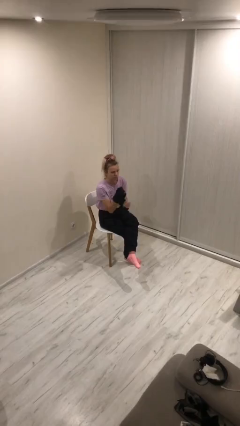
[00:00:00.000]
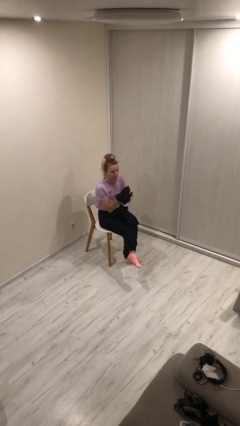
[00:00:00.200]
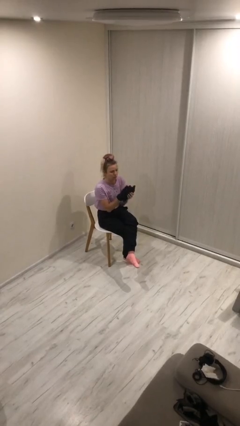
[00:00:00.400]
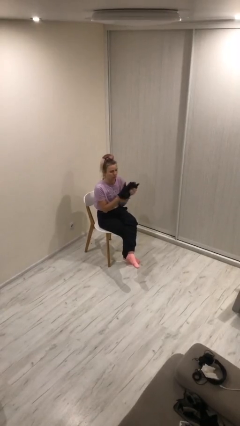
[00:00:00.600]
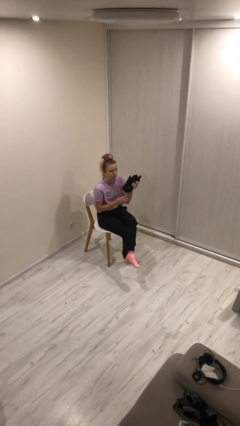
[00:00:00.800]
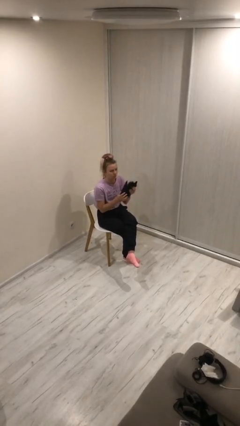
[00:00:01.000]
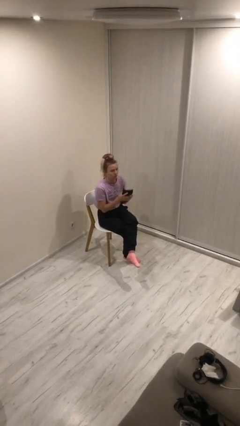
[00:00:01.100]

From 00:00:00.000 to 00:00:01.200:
person takes off gloves

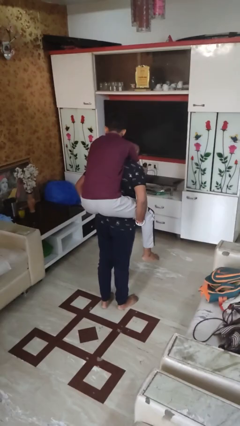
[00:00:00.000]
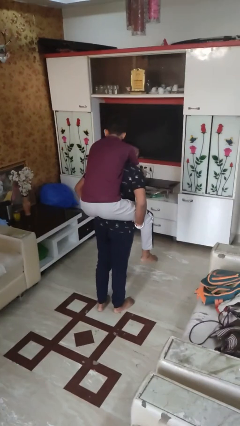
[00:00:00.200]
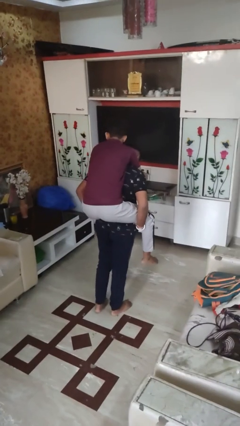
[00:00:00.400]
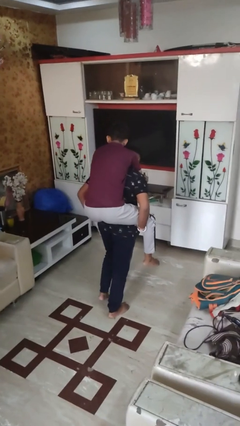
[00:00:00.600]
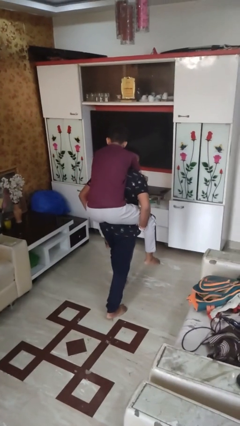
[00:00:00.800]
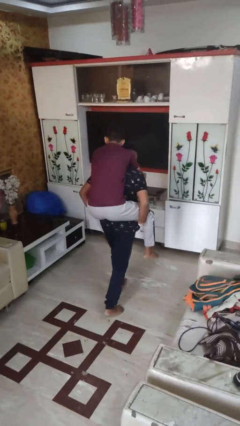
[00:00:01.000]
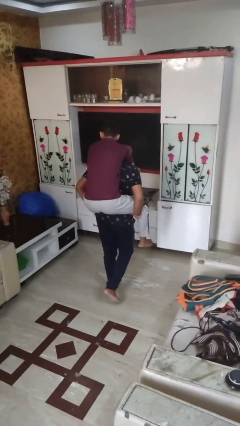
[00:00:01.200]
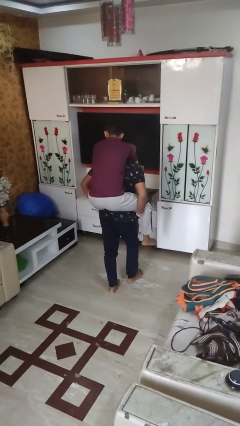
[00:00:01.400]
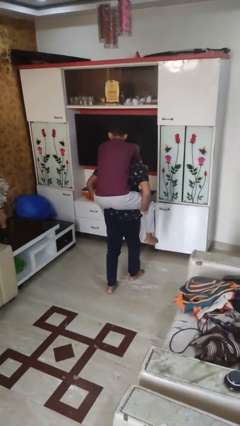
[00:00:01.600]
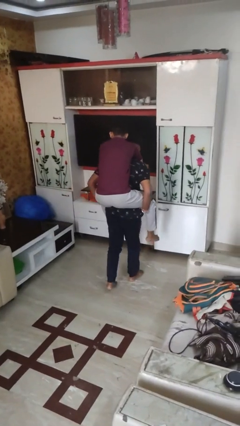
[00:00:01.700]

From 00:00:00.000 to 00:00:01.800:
person carries person on back

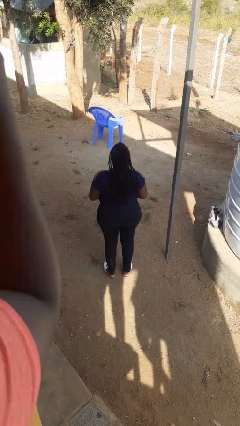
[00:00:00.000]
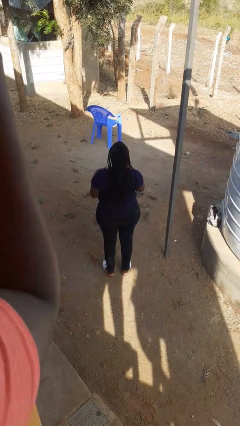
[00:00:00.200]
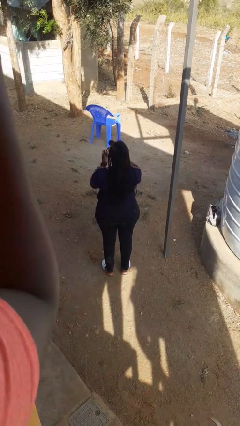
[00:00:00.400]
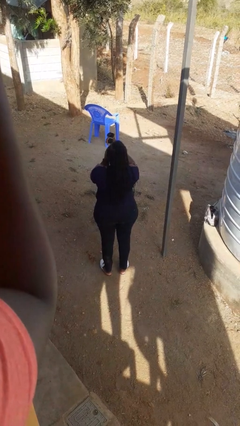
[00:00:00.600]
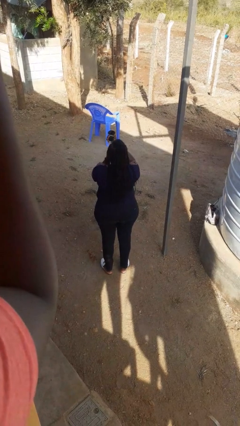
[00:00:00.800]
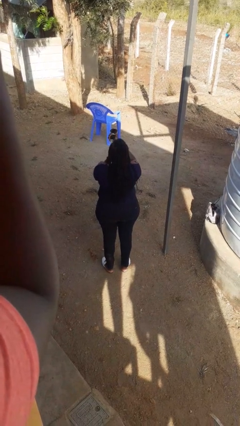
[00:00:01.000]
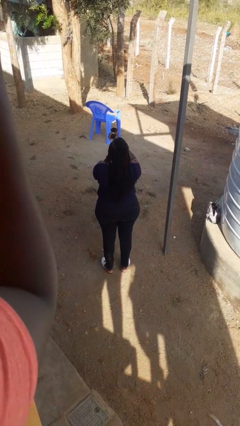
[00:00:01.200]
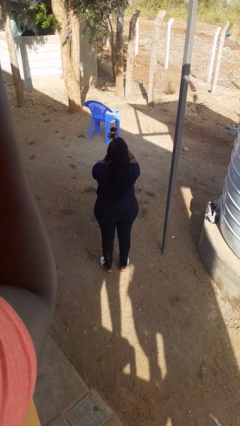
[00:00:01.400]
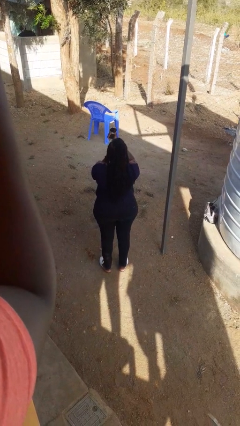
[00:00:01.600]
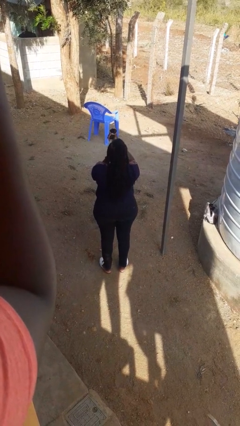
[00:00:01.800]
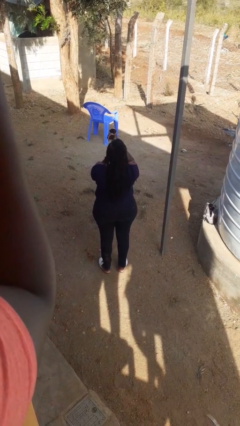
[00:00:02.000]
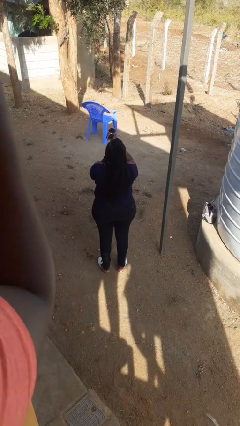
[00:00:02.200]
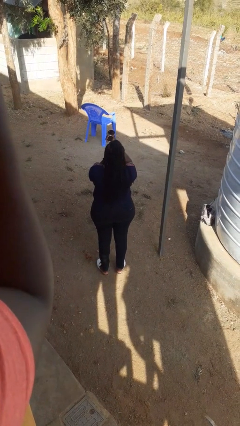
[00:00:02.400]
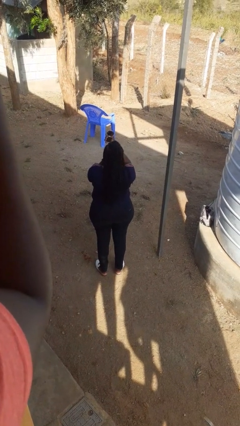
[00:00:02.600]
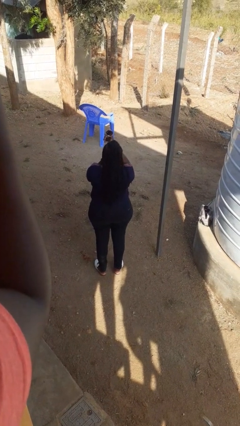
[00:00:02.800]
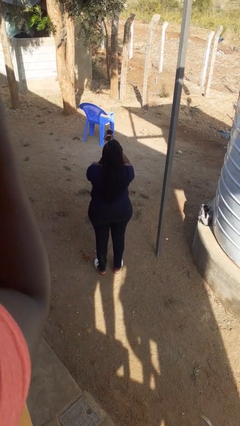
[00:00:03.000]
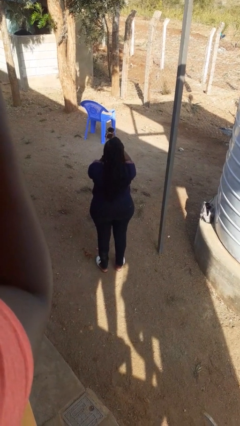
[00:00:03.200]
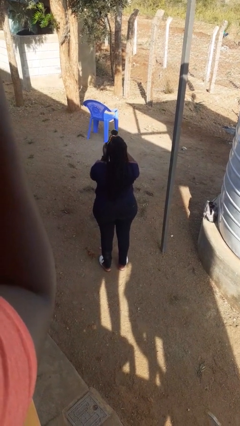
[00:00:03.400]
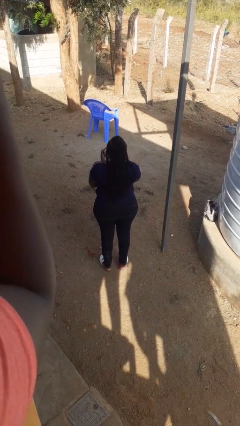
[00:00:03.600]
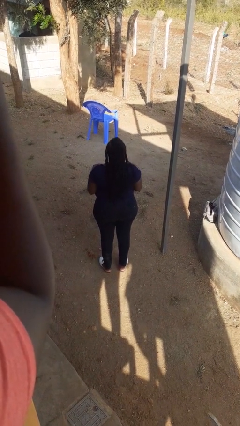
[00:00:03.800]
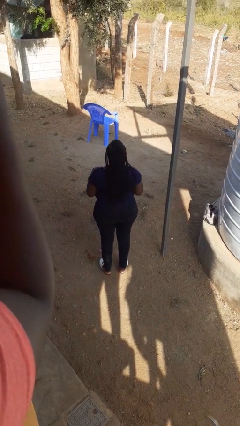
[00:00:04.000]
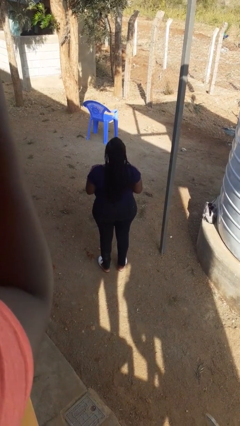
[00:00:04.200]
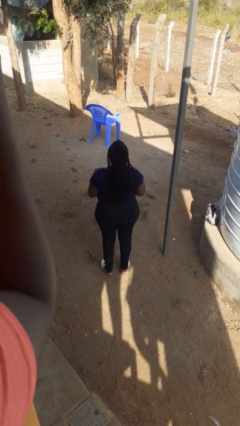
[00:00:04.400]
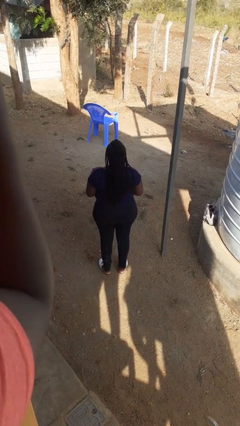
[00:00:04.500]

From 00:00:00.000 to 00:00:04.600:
person applies eye makeup

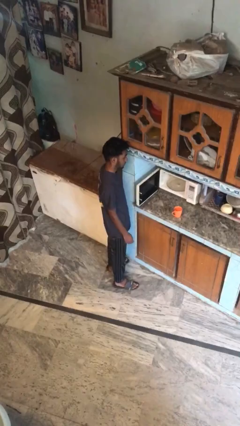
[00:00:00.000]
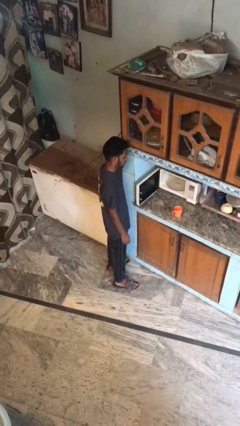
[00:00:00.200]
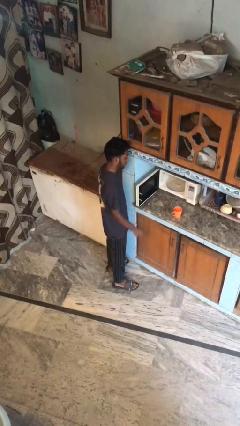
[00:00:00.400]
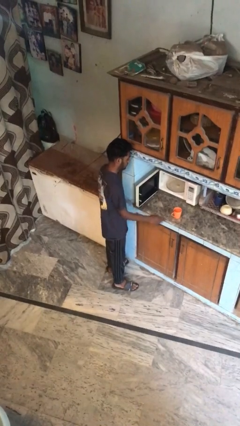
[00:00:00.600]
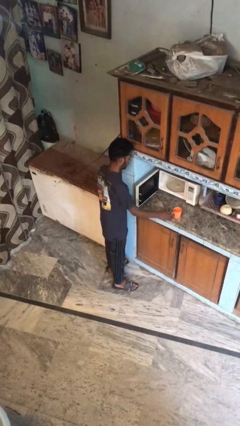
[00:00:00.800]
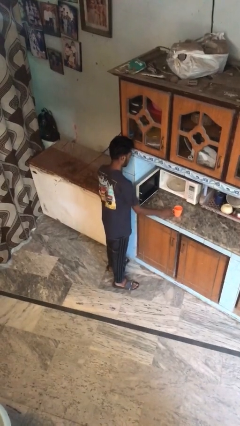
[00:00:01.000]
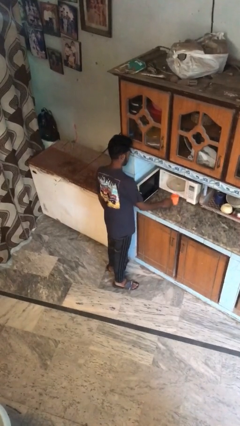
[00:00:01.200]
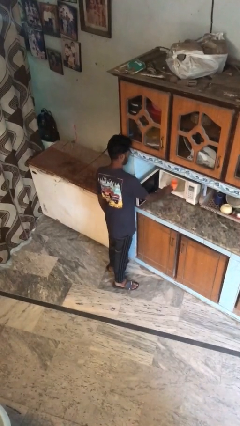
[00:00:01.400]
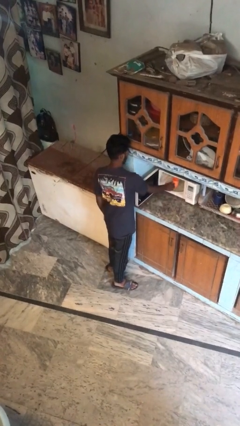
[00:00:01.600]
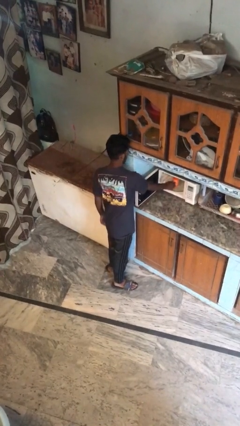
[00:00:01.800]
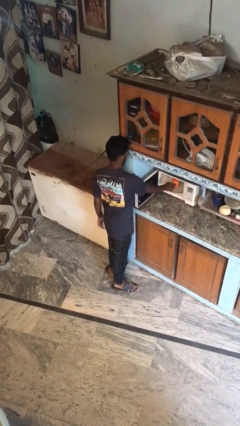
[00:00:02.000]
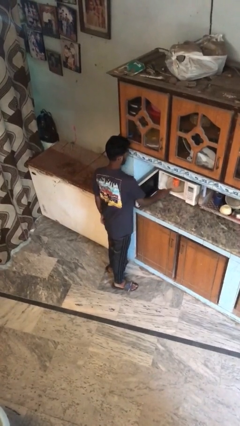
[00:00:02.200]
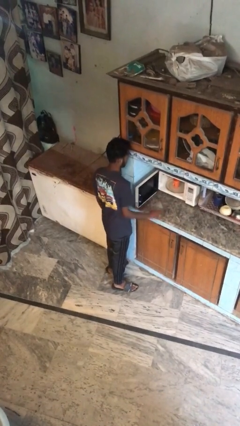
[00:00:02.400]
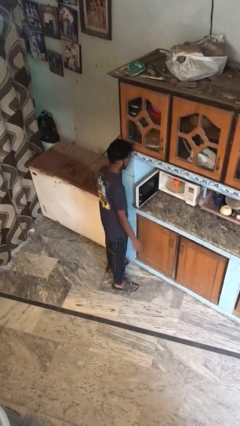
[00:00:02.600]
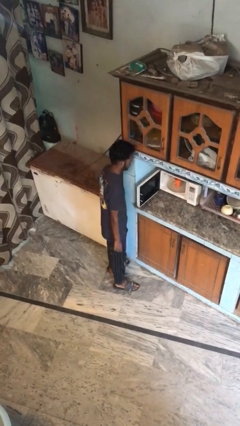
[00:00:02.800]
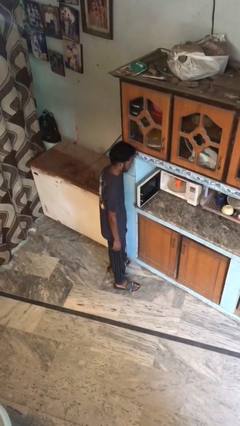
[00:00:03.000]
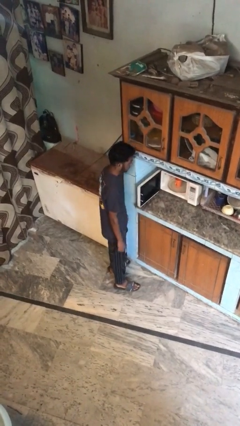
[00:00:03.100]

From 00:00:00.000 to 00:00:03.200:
person puts object into microwave

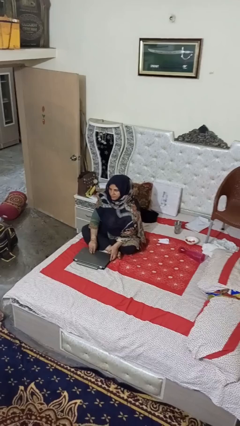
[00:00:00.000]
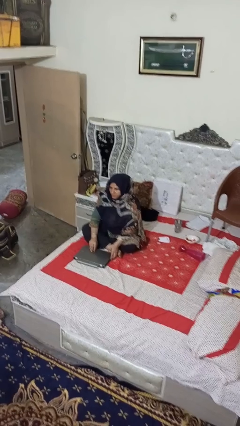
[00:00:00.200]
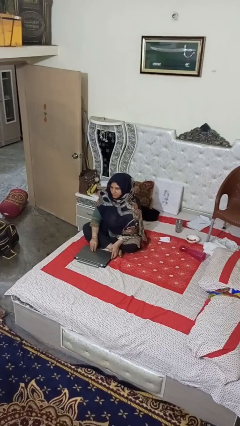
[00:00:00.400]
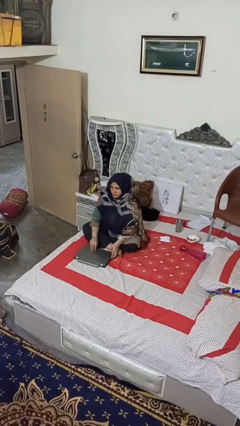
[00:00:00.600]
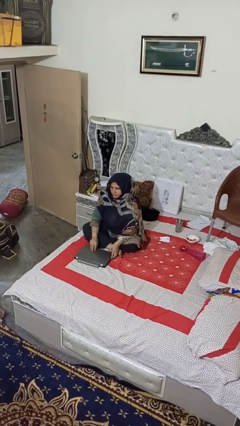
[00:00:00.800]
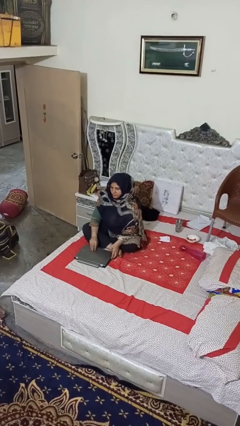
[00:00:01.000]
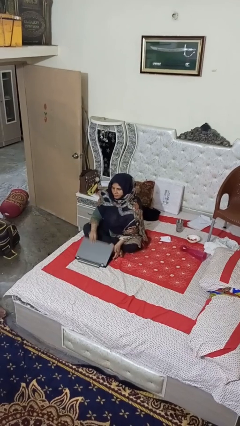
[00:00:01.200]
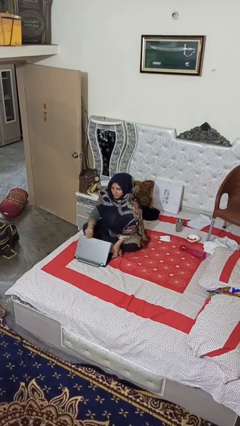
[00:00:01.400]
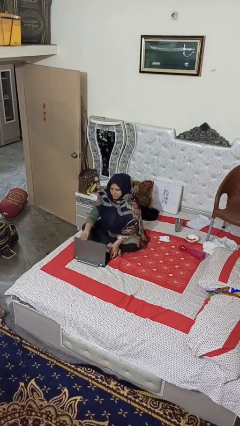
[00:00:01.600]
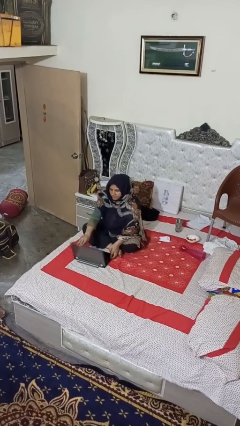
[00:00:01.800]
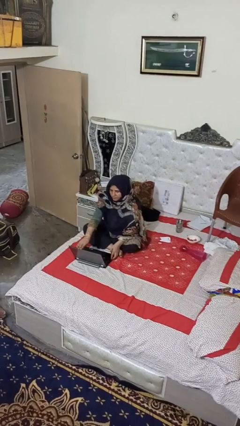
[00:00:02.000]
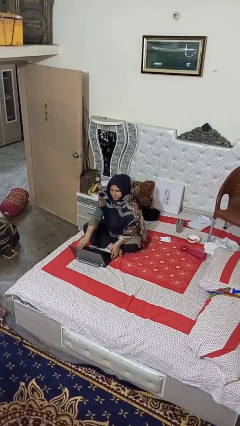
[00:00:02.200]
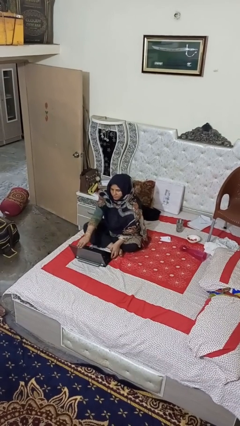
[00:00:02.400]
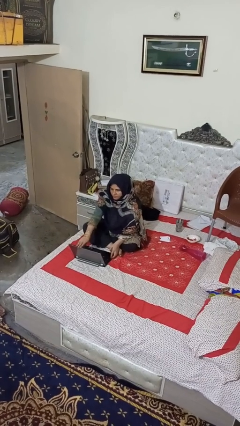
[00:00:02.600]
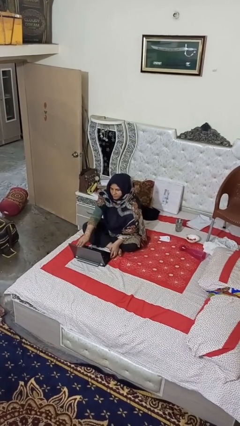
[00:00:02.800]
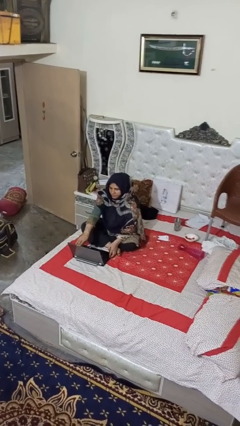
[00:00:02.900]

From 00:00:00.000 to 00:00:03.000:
person opens laptop

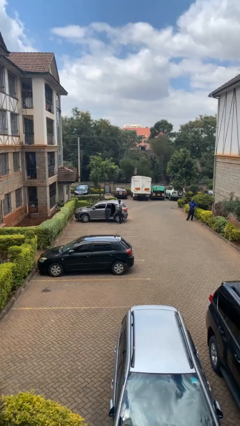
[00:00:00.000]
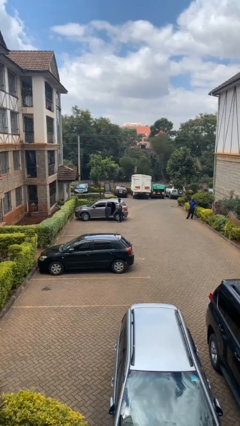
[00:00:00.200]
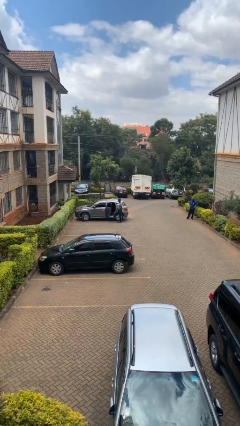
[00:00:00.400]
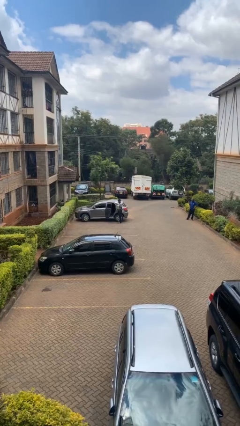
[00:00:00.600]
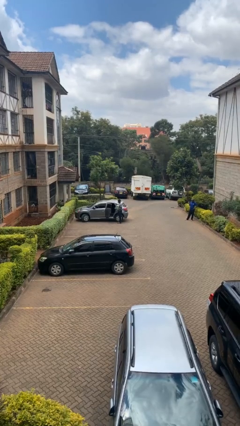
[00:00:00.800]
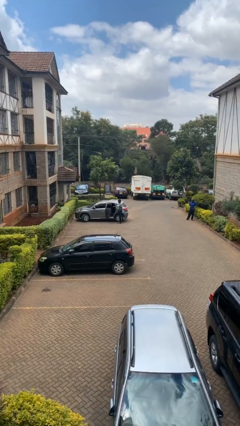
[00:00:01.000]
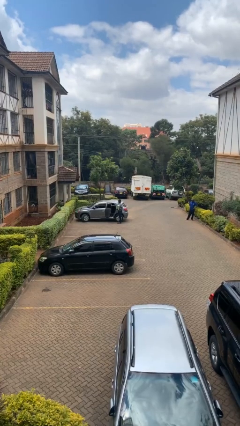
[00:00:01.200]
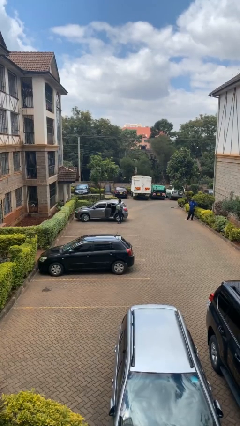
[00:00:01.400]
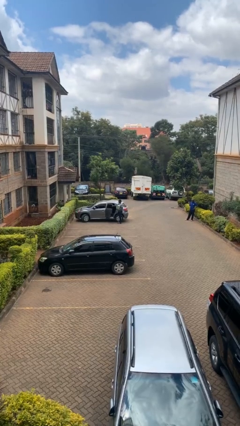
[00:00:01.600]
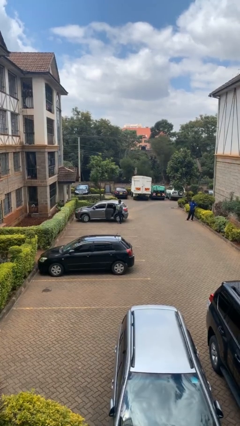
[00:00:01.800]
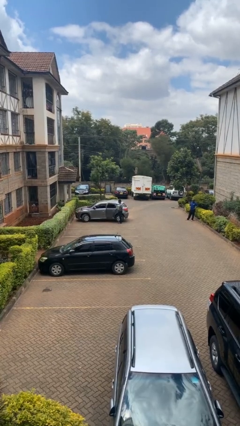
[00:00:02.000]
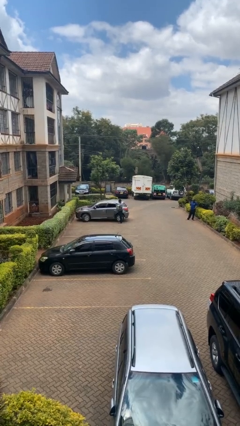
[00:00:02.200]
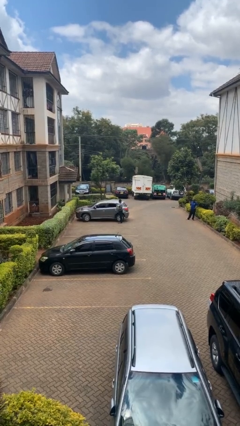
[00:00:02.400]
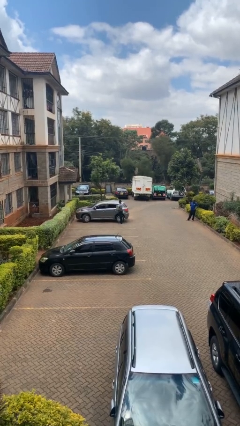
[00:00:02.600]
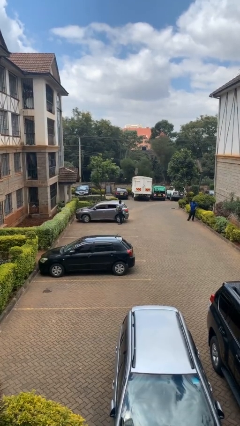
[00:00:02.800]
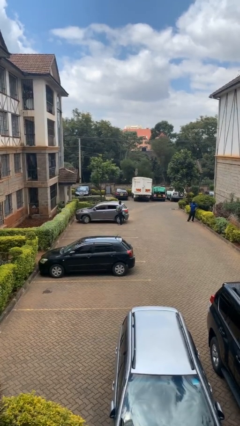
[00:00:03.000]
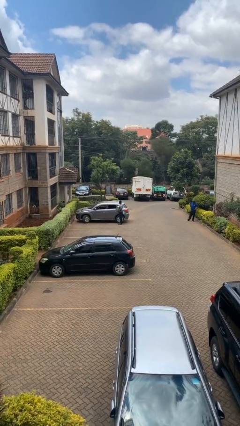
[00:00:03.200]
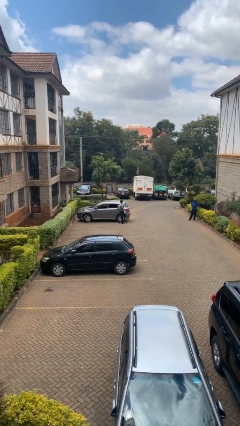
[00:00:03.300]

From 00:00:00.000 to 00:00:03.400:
person closes car door
